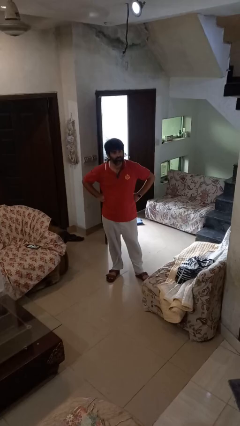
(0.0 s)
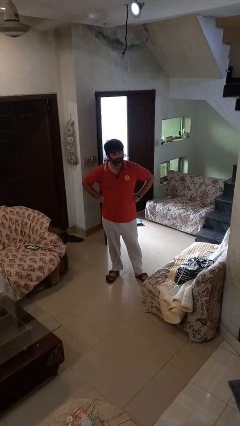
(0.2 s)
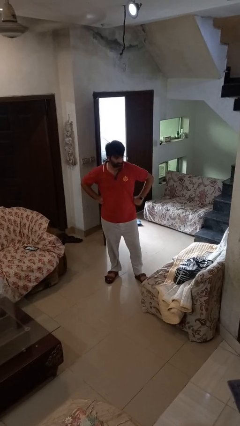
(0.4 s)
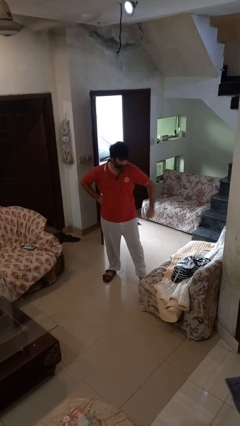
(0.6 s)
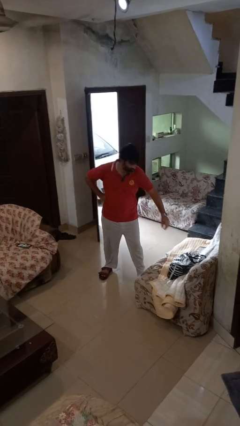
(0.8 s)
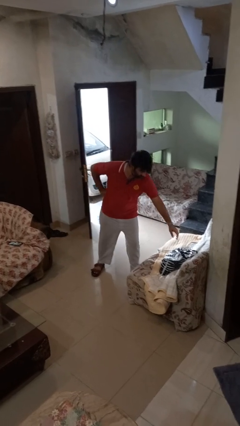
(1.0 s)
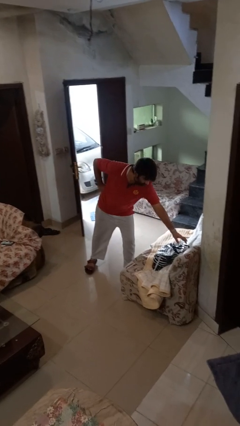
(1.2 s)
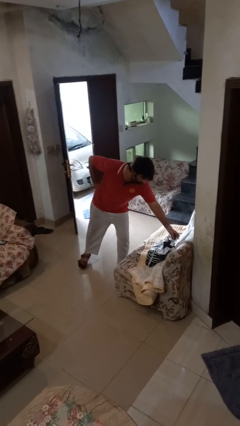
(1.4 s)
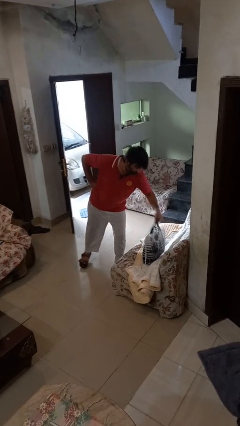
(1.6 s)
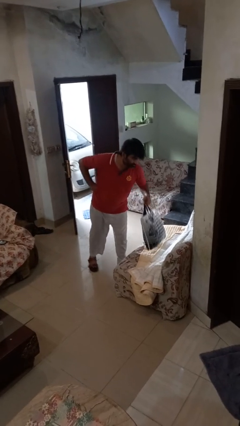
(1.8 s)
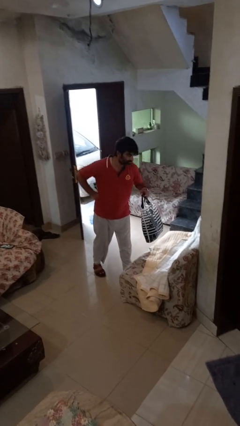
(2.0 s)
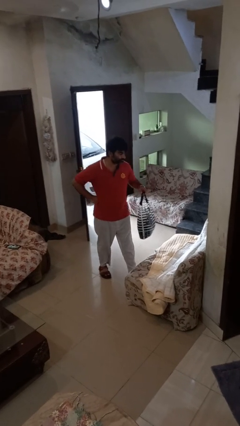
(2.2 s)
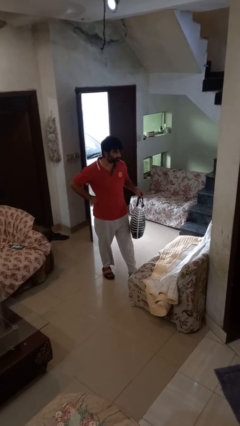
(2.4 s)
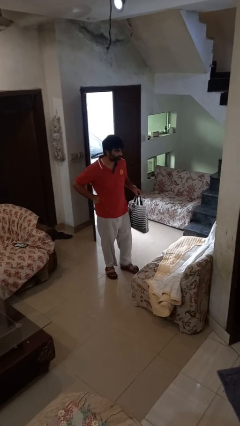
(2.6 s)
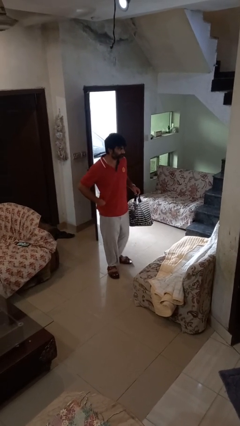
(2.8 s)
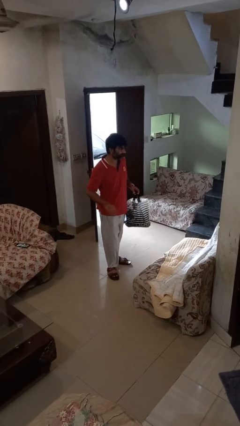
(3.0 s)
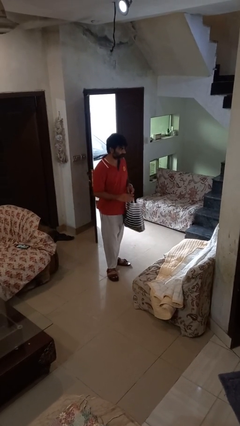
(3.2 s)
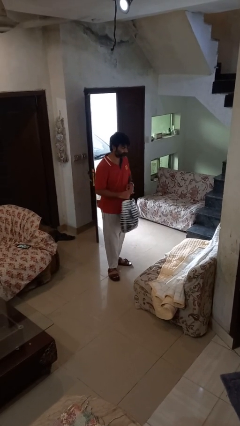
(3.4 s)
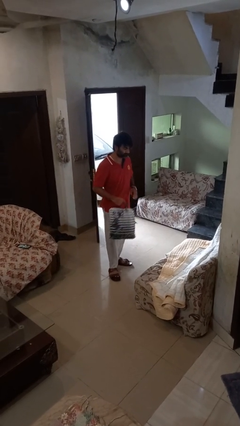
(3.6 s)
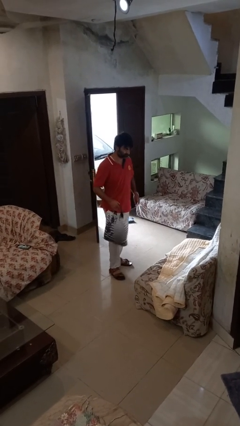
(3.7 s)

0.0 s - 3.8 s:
person picks up object from couch

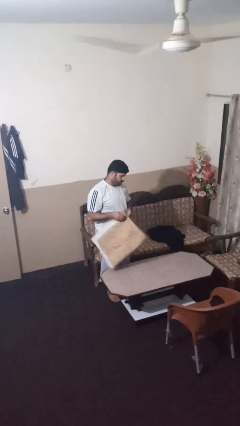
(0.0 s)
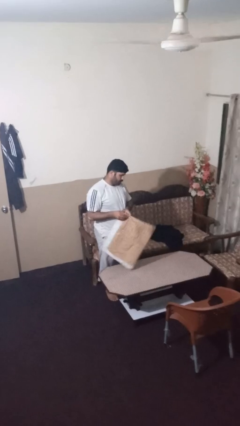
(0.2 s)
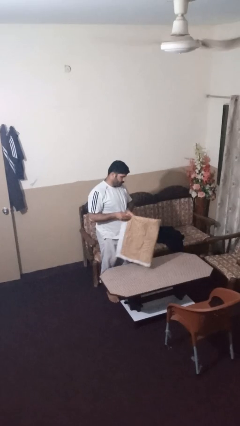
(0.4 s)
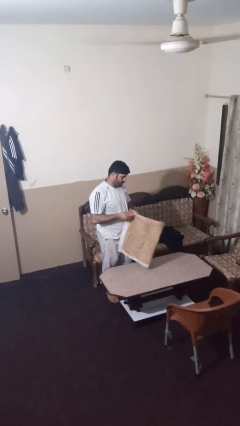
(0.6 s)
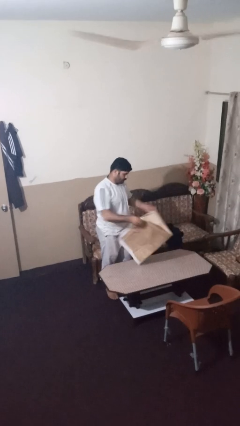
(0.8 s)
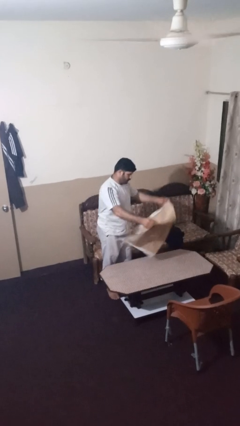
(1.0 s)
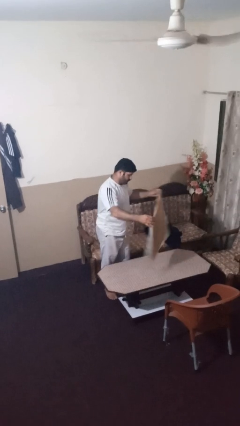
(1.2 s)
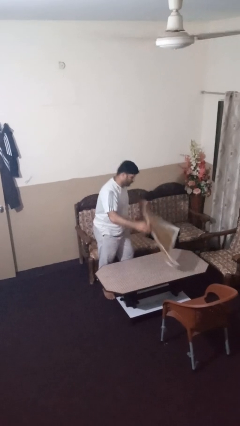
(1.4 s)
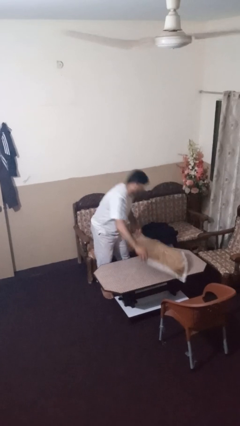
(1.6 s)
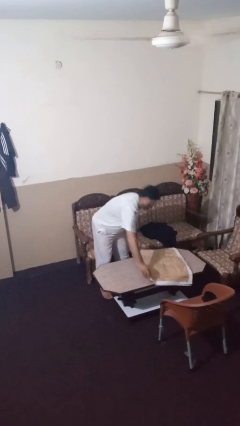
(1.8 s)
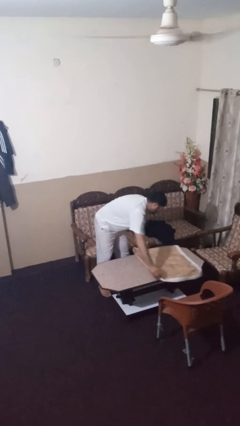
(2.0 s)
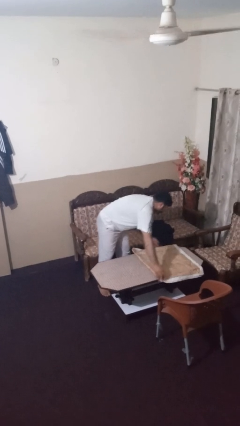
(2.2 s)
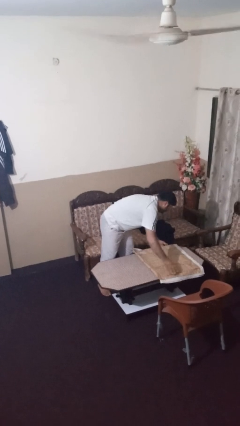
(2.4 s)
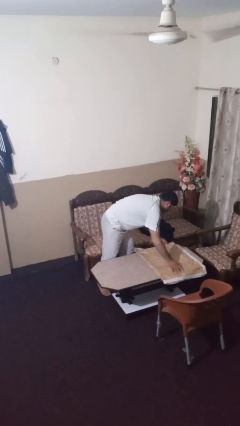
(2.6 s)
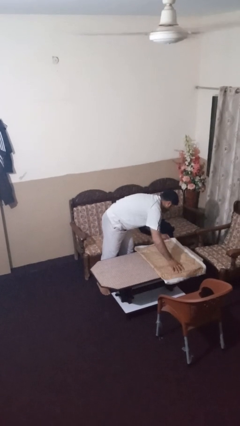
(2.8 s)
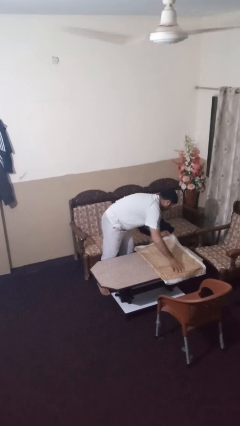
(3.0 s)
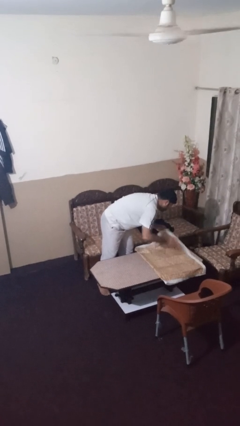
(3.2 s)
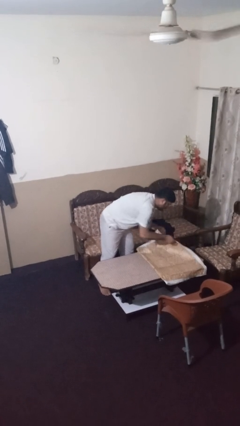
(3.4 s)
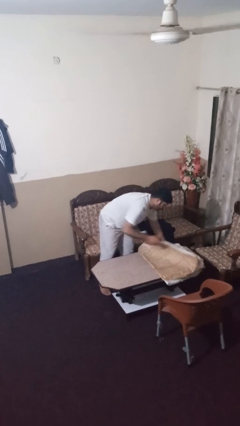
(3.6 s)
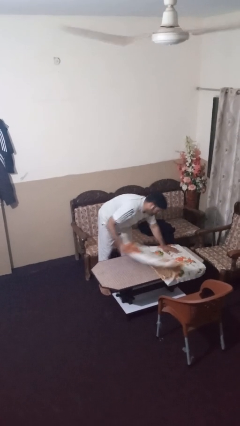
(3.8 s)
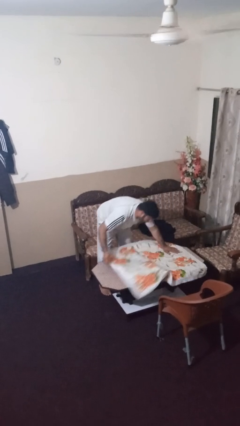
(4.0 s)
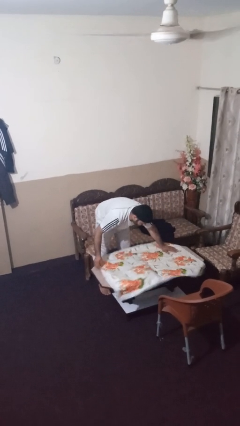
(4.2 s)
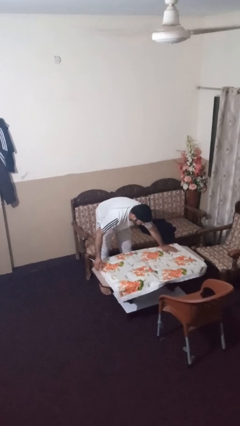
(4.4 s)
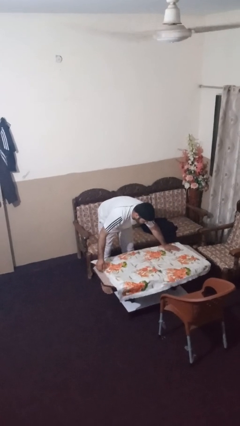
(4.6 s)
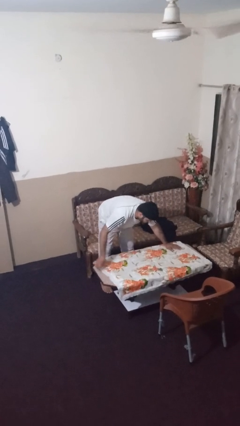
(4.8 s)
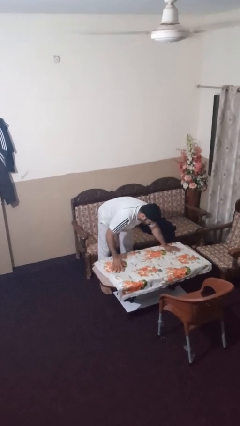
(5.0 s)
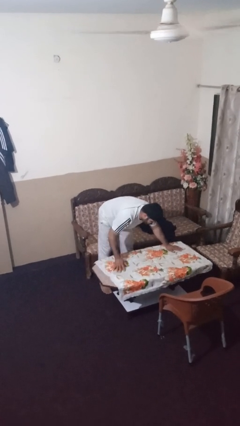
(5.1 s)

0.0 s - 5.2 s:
person spreads tablecloth

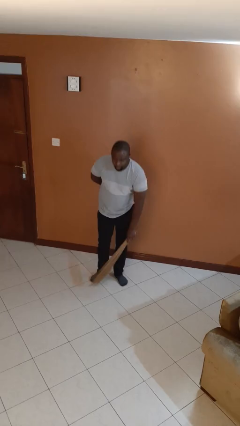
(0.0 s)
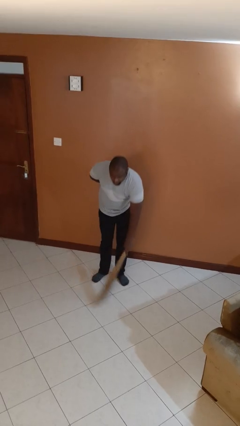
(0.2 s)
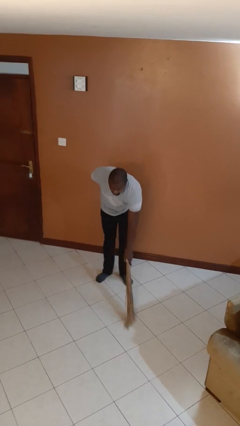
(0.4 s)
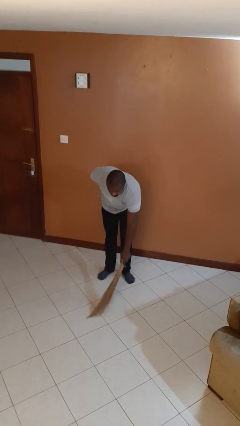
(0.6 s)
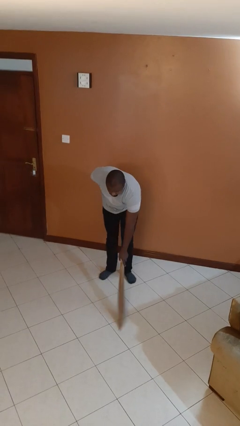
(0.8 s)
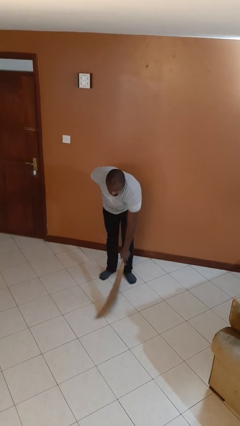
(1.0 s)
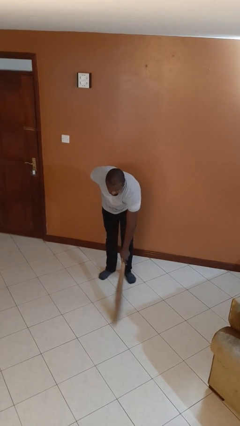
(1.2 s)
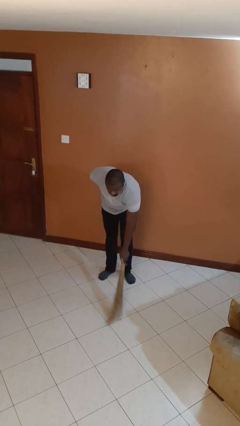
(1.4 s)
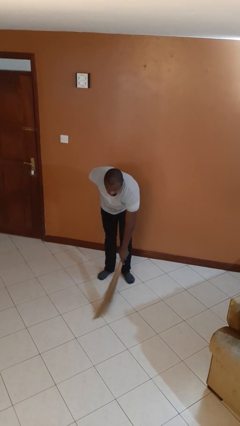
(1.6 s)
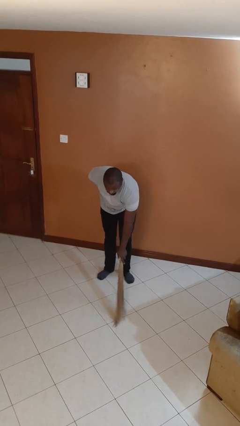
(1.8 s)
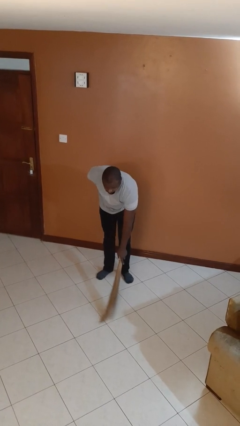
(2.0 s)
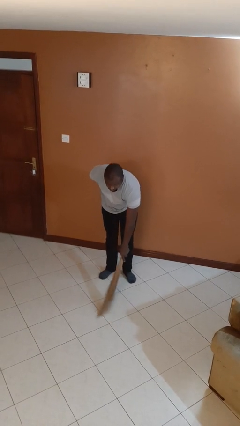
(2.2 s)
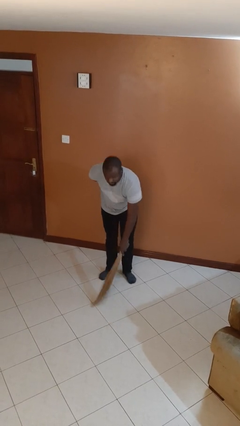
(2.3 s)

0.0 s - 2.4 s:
person sweeps floor

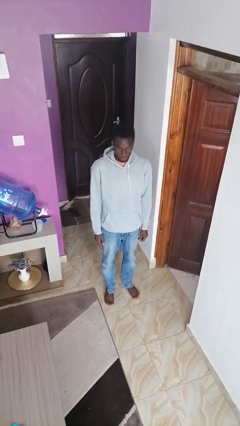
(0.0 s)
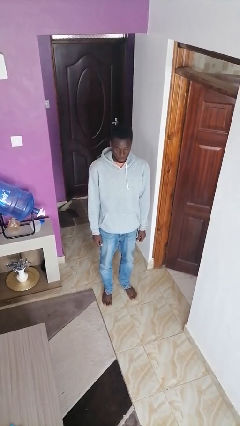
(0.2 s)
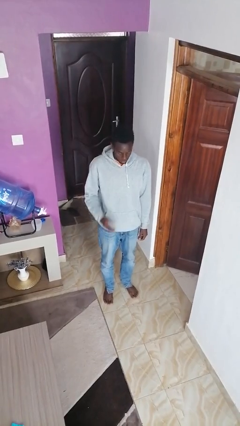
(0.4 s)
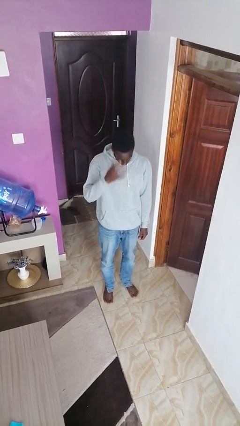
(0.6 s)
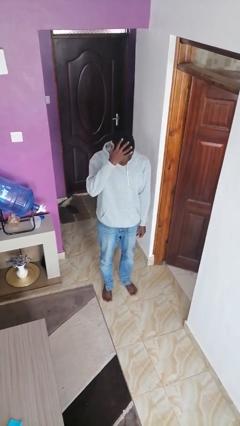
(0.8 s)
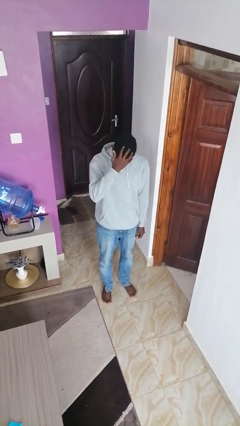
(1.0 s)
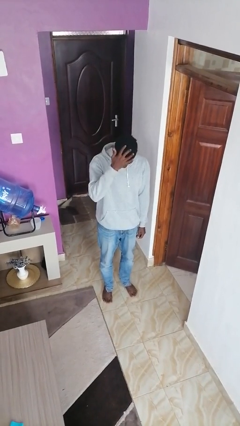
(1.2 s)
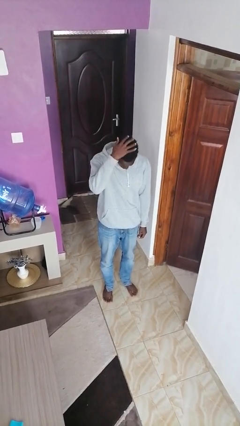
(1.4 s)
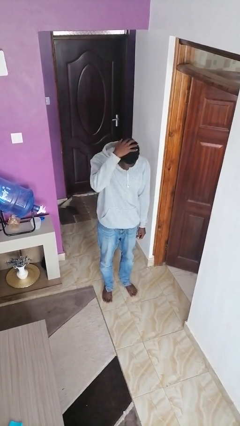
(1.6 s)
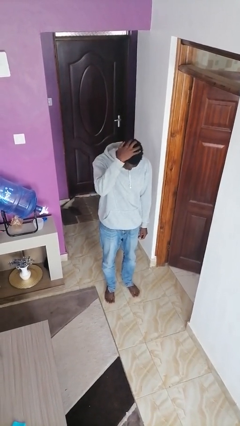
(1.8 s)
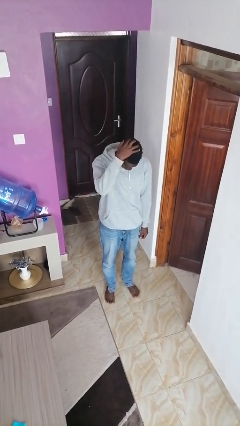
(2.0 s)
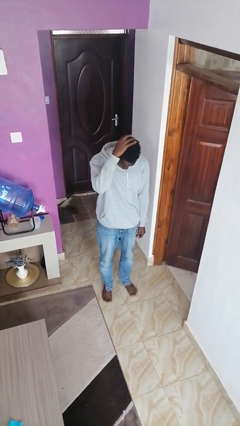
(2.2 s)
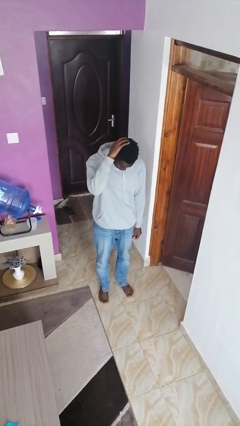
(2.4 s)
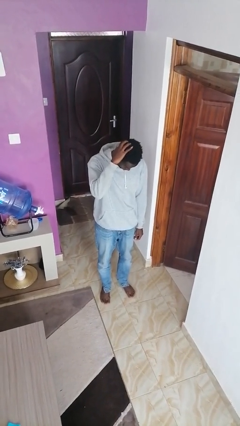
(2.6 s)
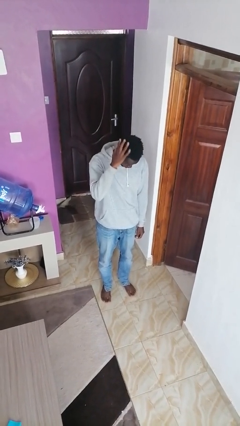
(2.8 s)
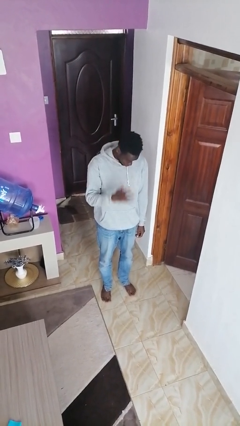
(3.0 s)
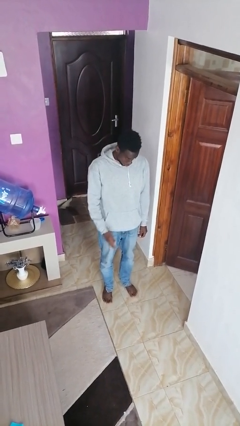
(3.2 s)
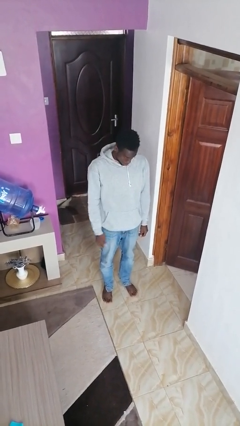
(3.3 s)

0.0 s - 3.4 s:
person strokes hair

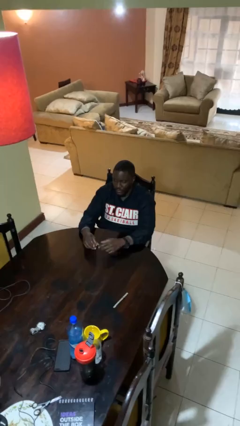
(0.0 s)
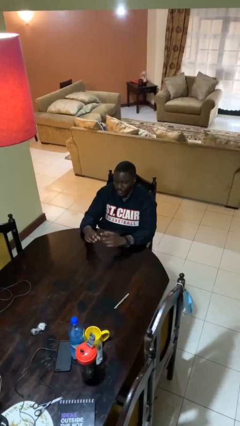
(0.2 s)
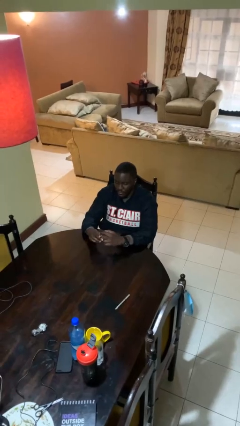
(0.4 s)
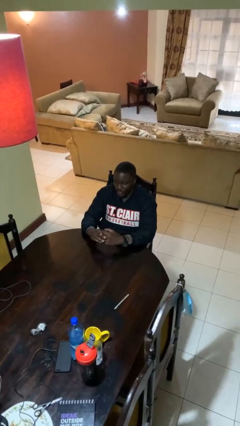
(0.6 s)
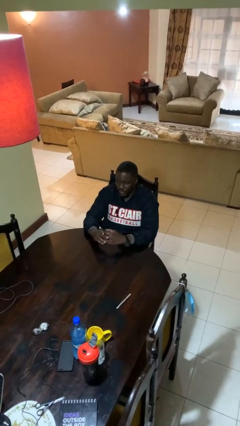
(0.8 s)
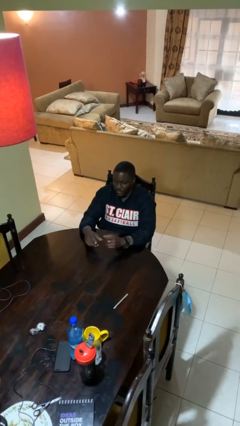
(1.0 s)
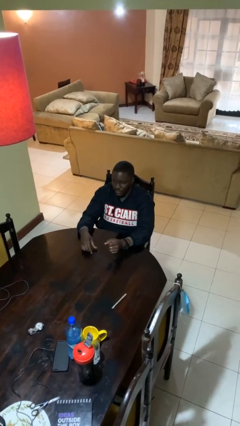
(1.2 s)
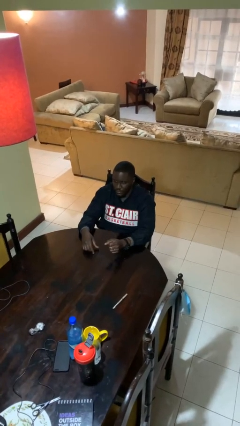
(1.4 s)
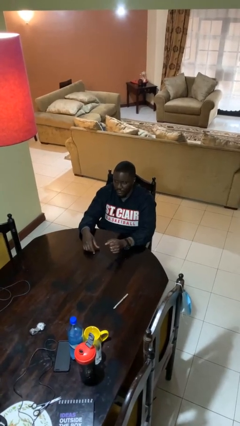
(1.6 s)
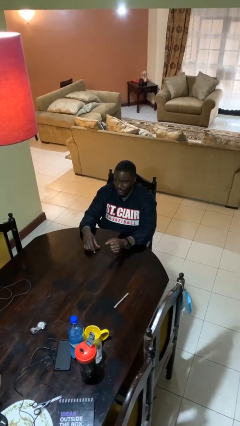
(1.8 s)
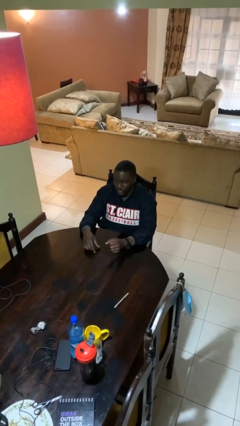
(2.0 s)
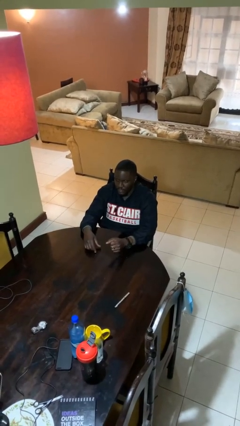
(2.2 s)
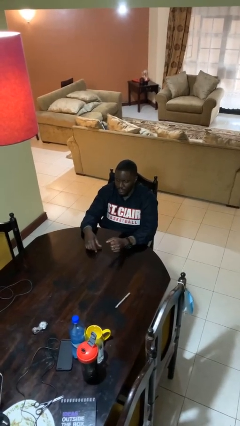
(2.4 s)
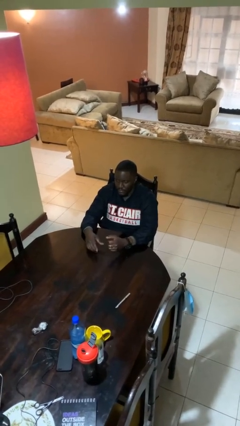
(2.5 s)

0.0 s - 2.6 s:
person puts on ring
